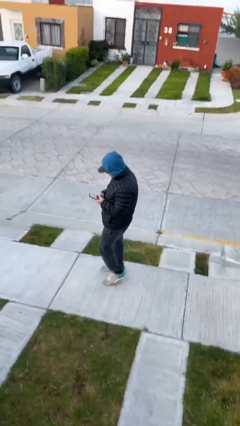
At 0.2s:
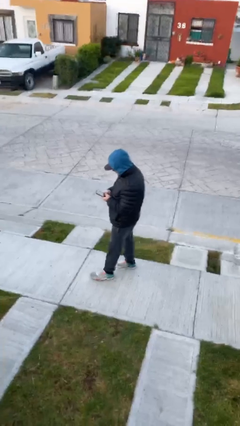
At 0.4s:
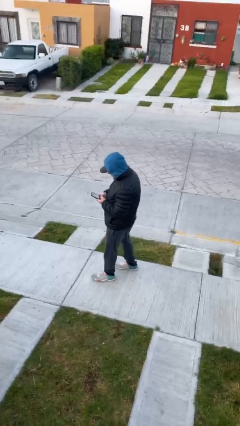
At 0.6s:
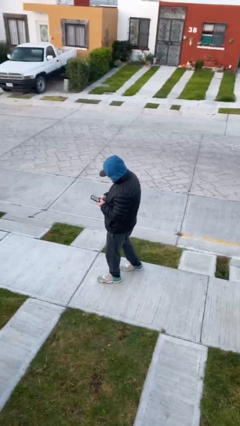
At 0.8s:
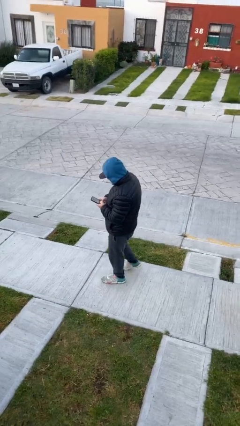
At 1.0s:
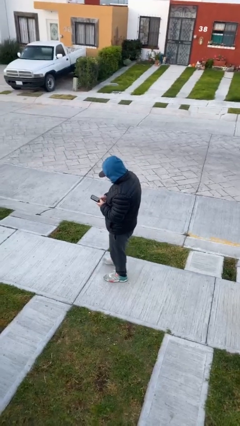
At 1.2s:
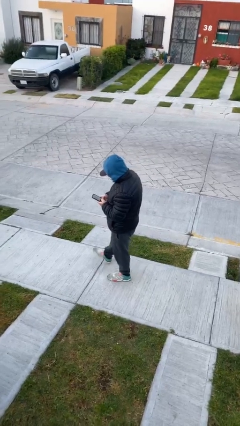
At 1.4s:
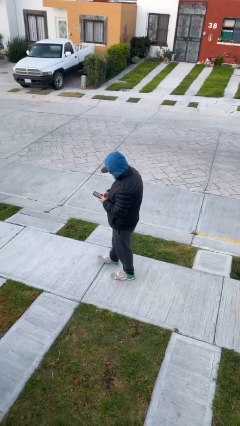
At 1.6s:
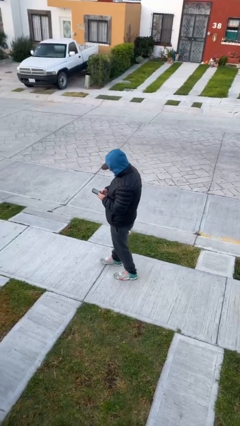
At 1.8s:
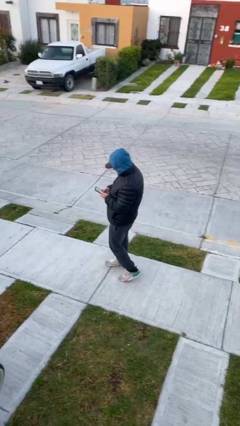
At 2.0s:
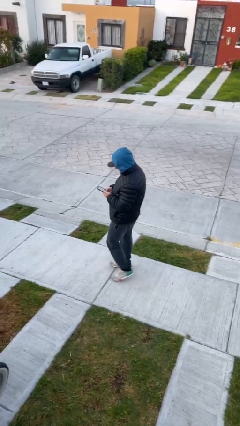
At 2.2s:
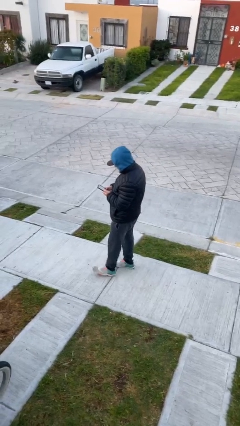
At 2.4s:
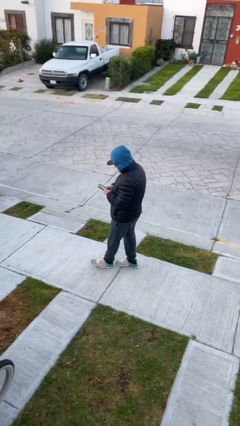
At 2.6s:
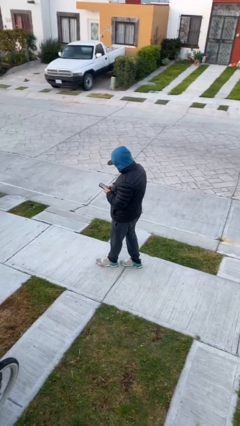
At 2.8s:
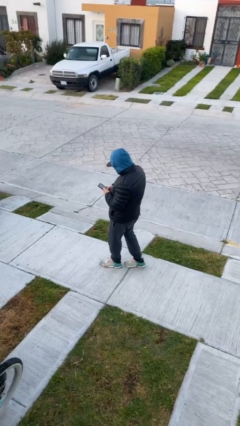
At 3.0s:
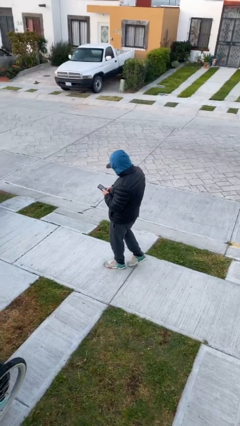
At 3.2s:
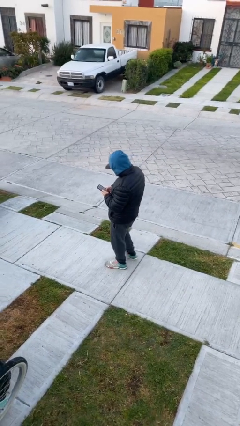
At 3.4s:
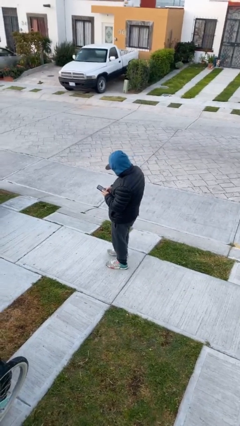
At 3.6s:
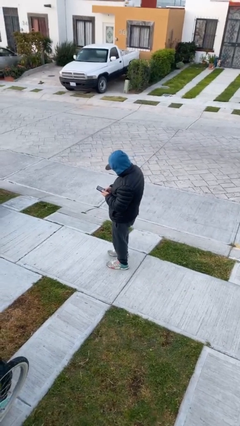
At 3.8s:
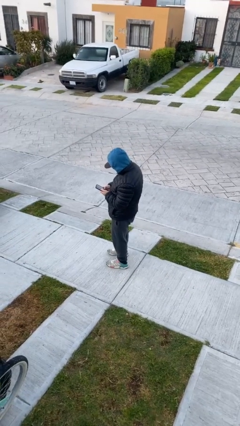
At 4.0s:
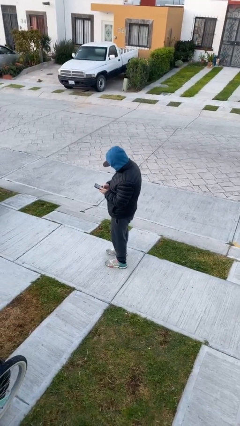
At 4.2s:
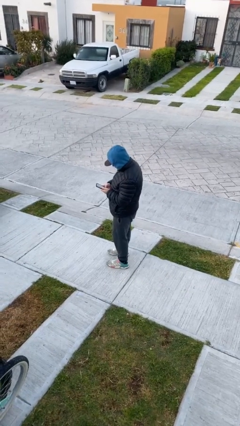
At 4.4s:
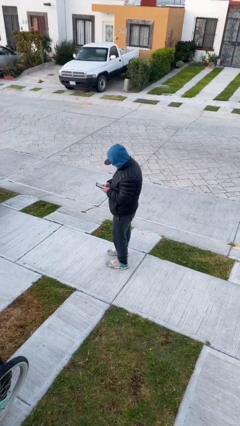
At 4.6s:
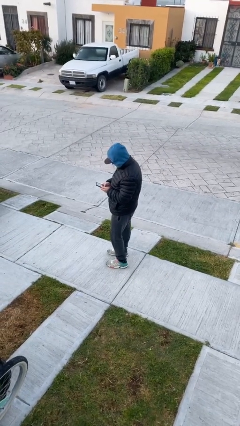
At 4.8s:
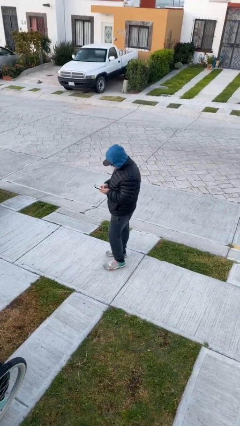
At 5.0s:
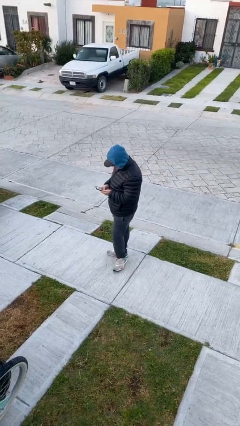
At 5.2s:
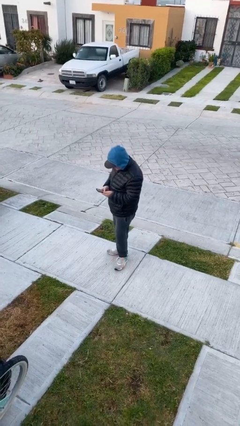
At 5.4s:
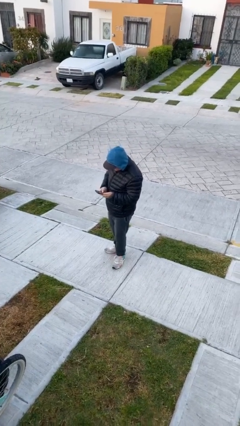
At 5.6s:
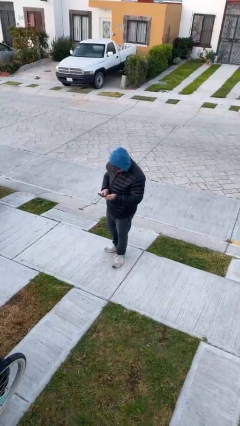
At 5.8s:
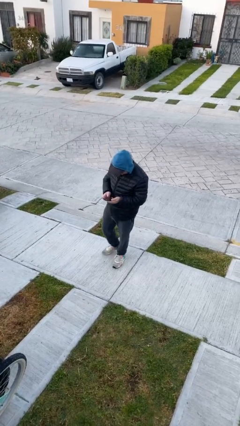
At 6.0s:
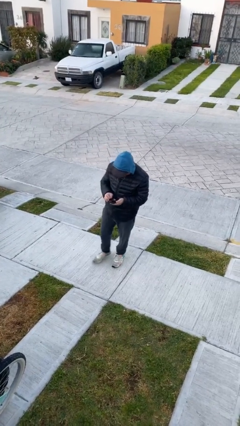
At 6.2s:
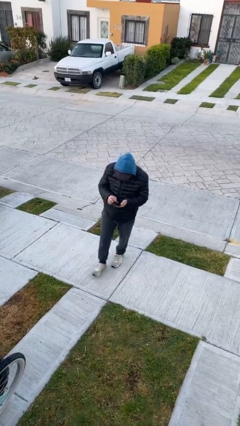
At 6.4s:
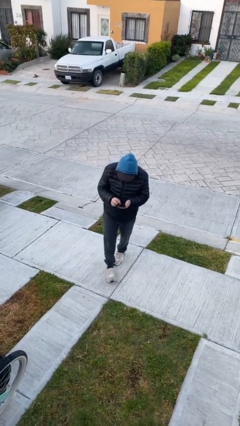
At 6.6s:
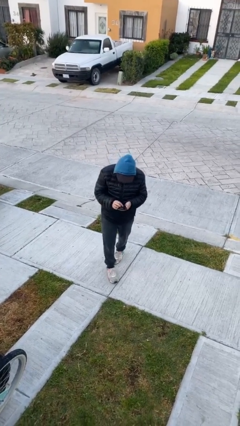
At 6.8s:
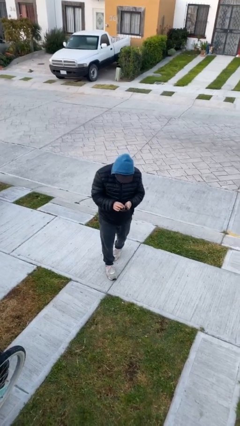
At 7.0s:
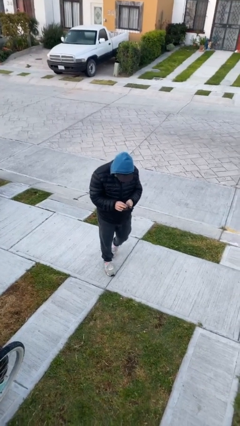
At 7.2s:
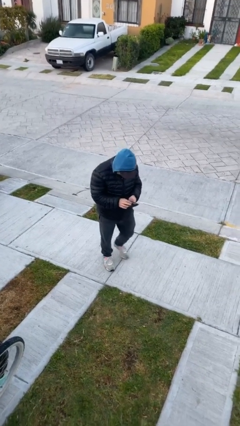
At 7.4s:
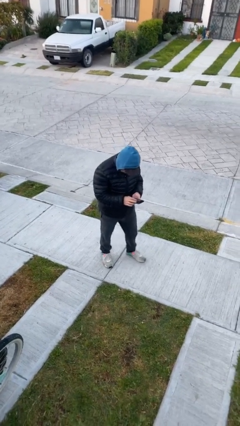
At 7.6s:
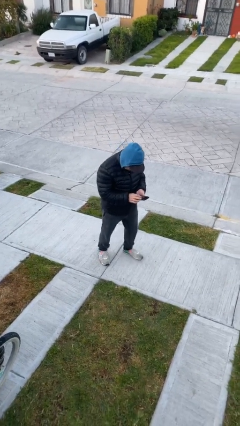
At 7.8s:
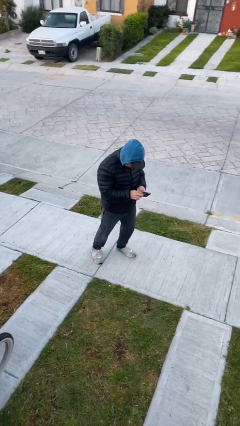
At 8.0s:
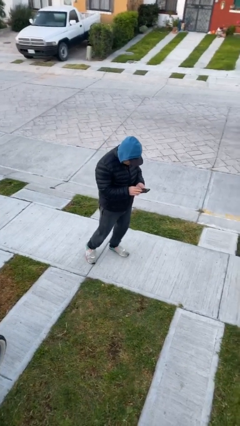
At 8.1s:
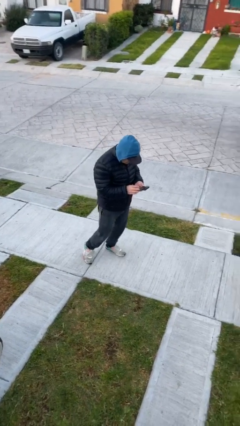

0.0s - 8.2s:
person texts on phone

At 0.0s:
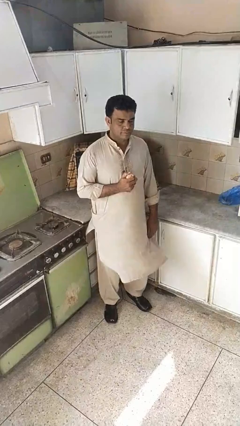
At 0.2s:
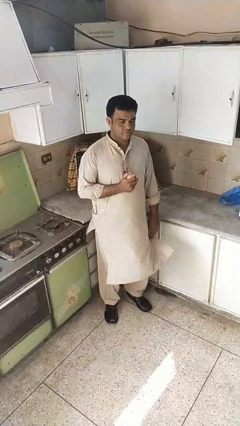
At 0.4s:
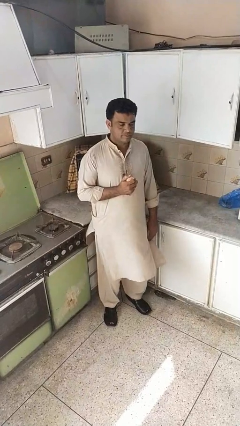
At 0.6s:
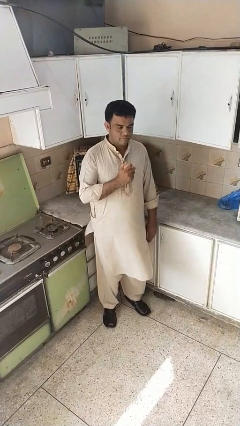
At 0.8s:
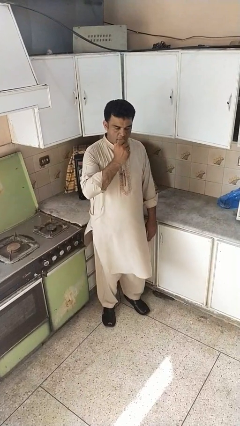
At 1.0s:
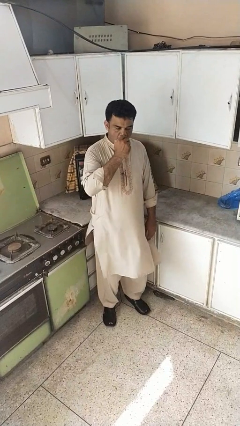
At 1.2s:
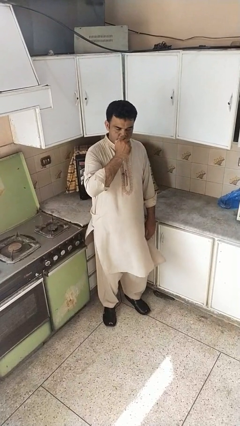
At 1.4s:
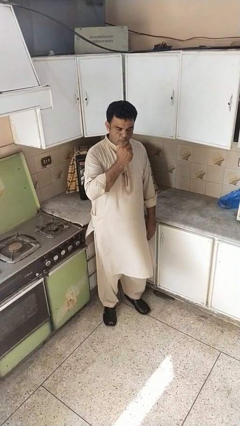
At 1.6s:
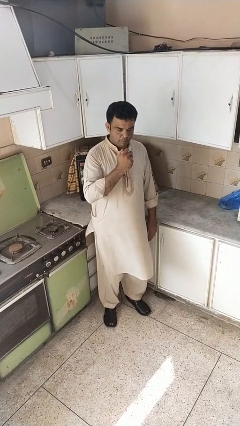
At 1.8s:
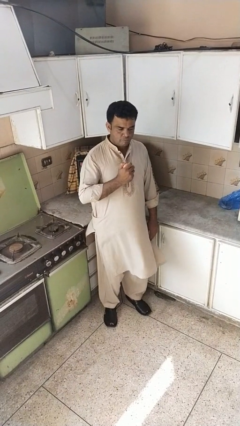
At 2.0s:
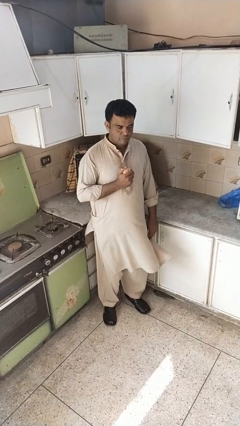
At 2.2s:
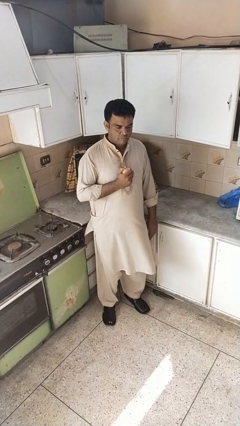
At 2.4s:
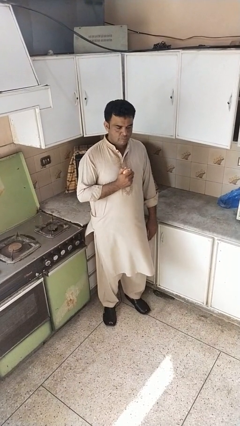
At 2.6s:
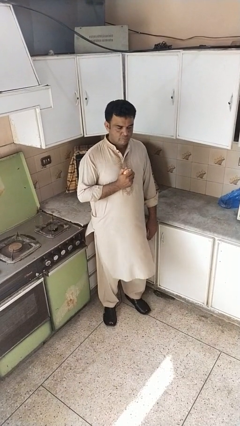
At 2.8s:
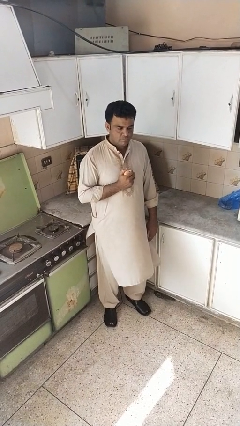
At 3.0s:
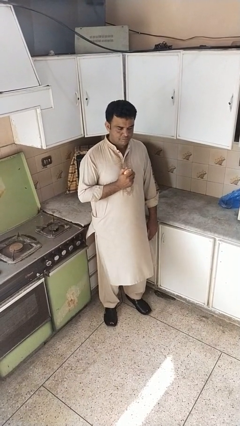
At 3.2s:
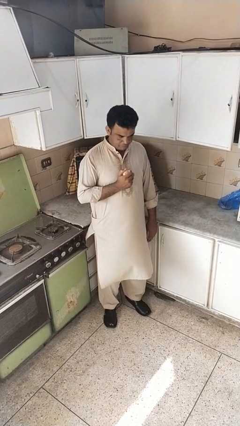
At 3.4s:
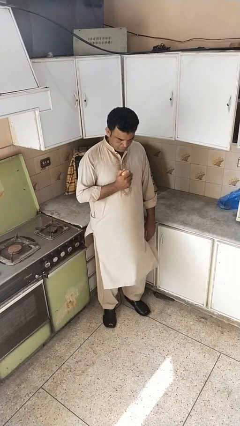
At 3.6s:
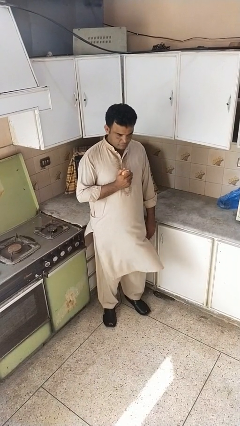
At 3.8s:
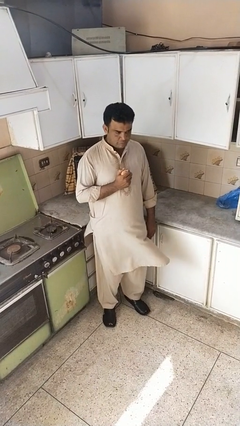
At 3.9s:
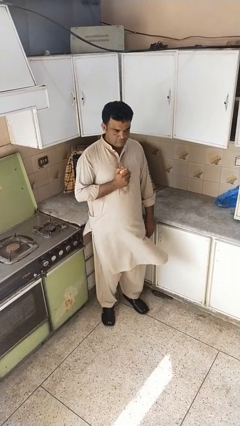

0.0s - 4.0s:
person eats apple

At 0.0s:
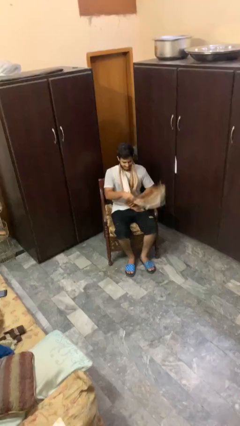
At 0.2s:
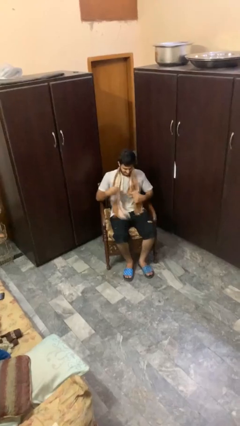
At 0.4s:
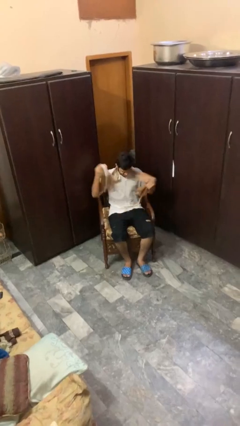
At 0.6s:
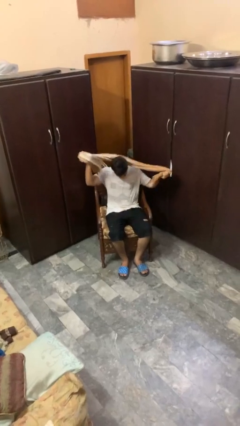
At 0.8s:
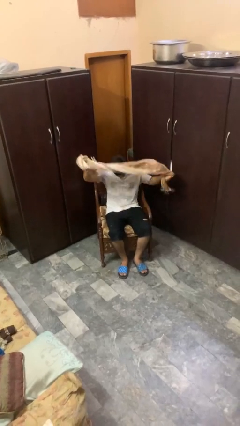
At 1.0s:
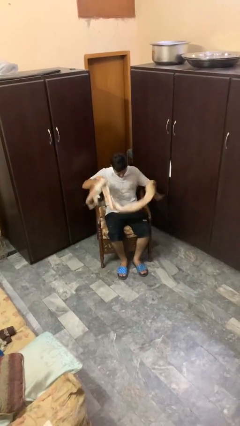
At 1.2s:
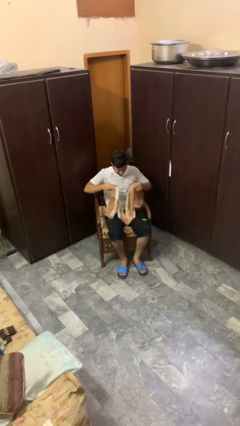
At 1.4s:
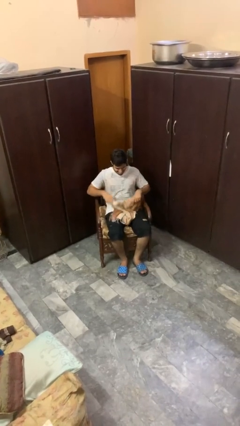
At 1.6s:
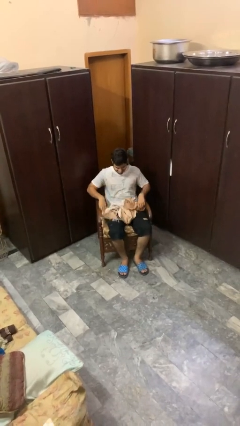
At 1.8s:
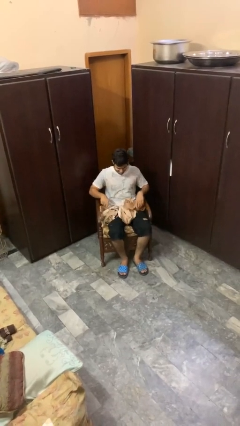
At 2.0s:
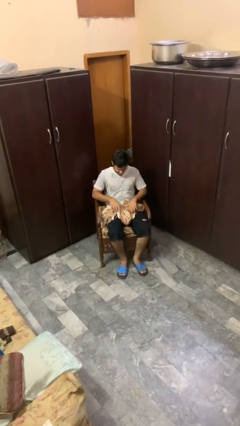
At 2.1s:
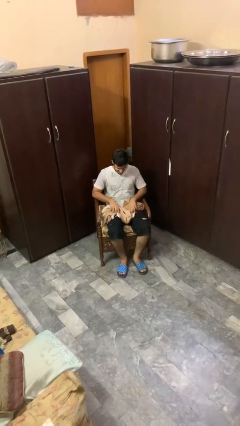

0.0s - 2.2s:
person takes off scarf

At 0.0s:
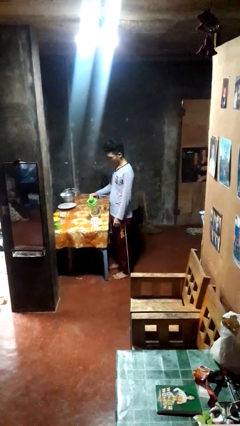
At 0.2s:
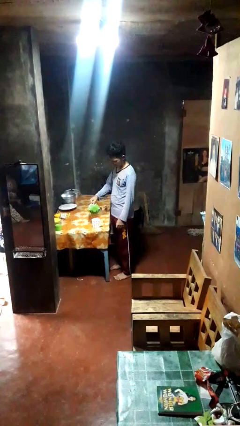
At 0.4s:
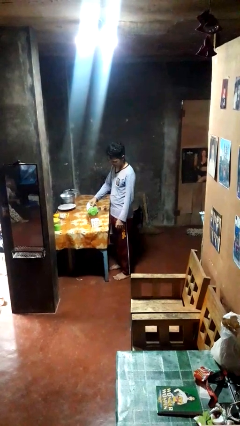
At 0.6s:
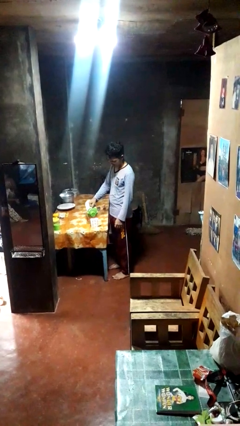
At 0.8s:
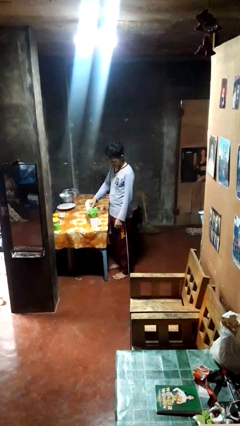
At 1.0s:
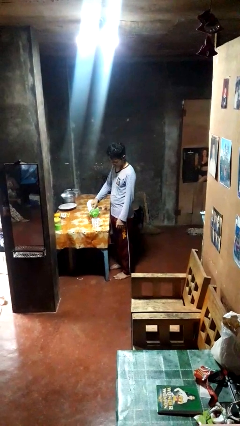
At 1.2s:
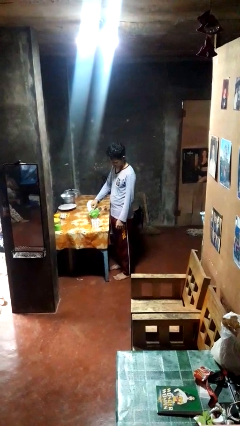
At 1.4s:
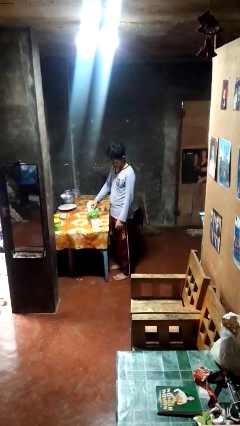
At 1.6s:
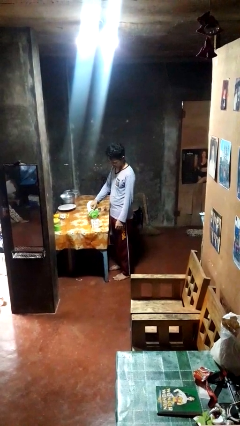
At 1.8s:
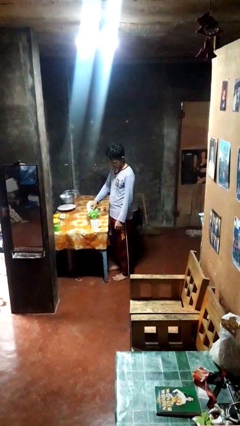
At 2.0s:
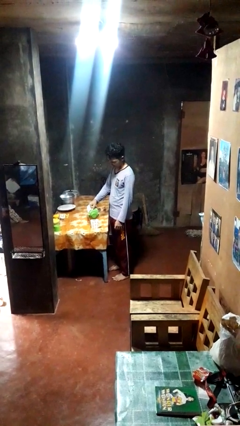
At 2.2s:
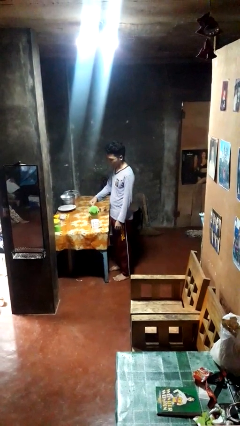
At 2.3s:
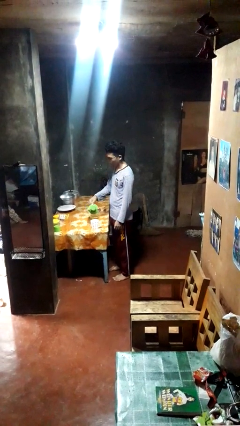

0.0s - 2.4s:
person pours coffee into mug

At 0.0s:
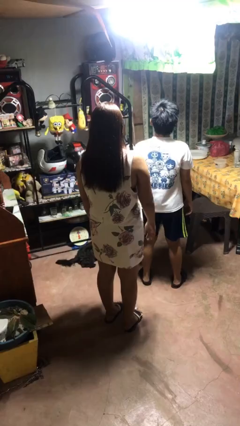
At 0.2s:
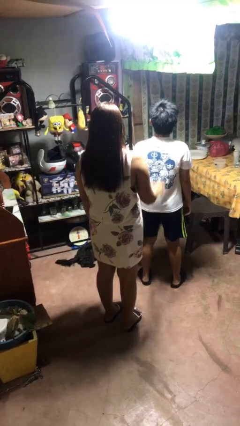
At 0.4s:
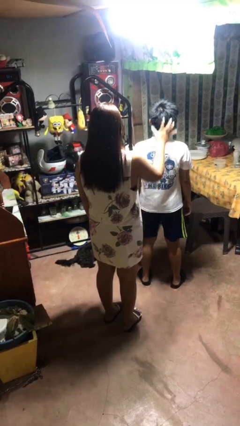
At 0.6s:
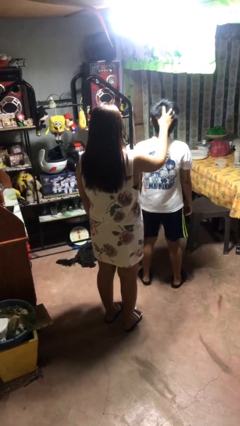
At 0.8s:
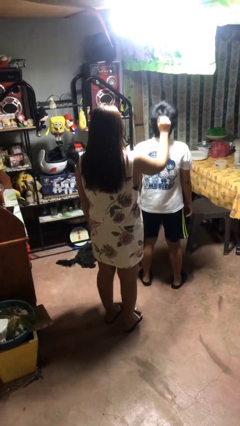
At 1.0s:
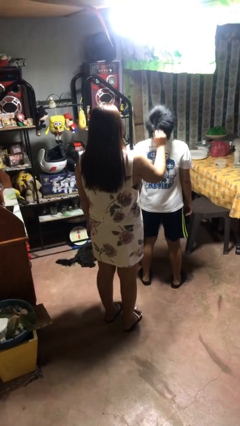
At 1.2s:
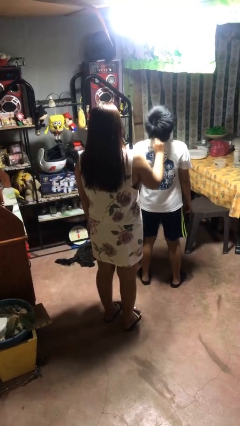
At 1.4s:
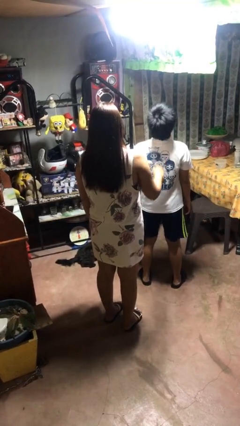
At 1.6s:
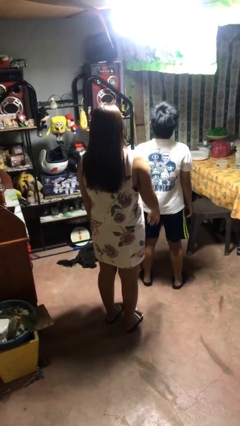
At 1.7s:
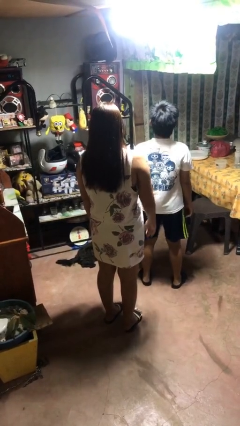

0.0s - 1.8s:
person grabs person by hair
